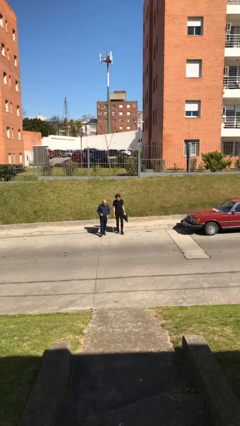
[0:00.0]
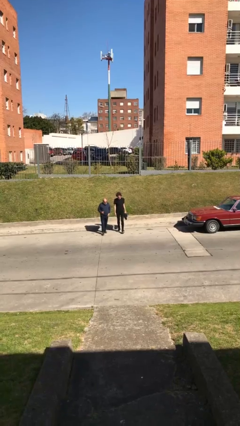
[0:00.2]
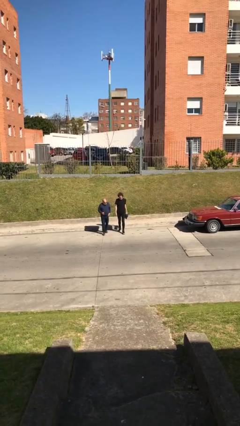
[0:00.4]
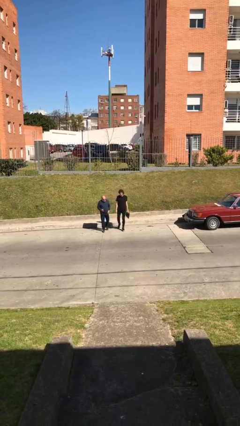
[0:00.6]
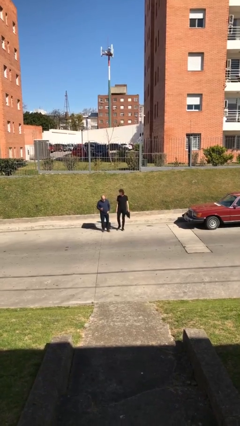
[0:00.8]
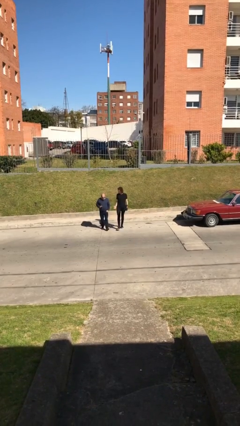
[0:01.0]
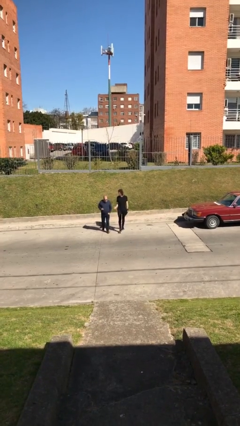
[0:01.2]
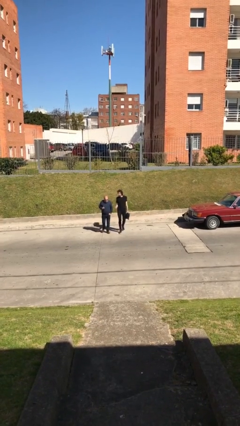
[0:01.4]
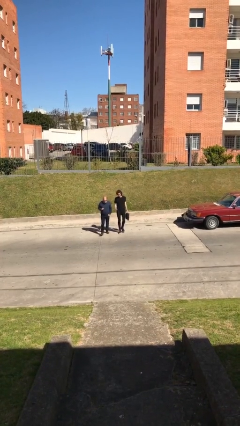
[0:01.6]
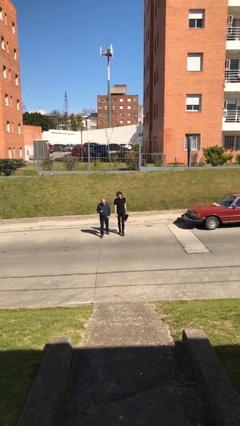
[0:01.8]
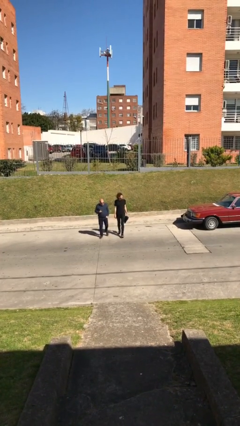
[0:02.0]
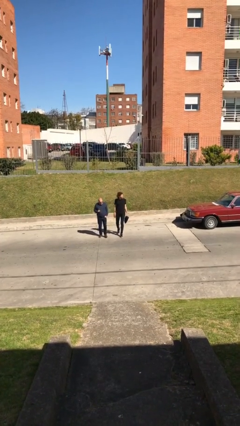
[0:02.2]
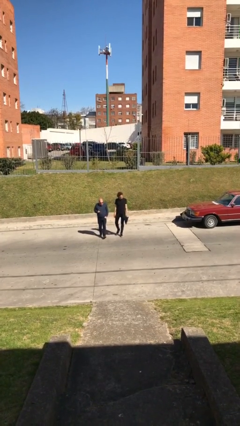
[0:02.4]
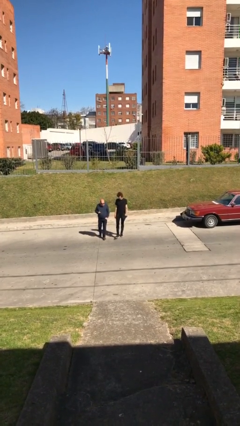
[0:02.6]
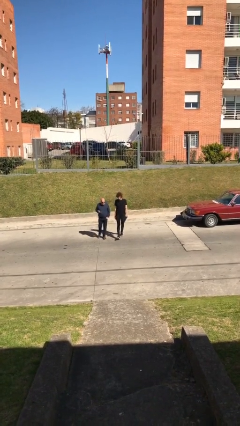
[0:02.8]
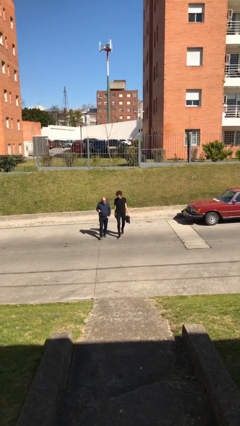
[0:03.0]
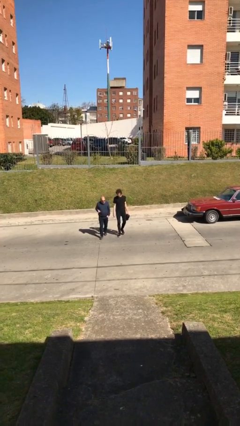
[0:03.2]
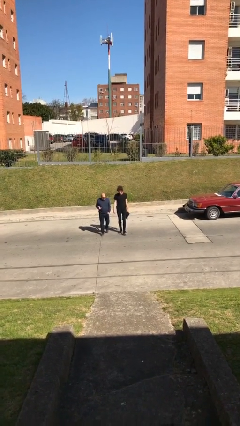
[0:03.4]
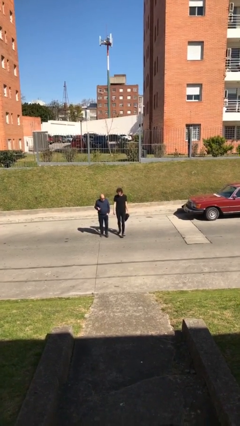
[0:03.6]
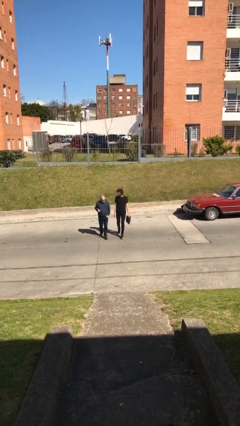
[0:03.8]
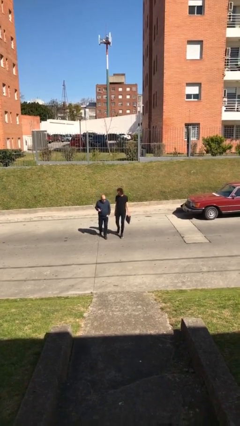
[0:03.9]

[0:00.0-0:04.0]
person talks to person

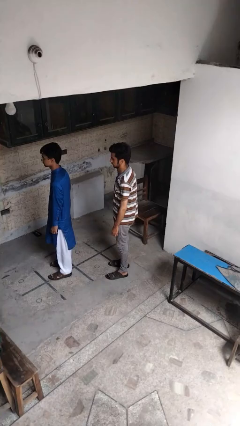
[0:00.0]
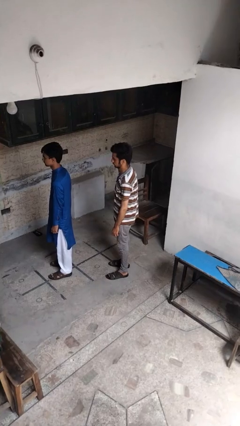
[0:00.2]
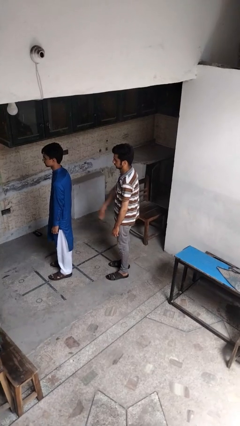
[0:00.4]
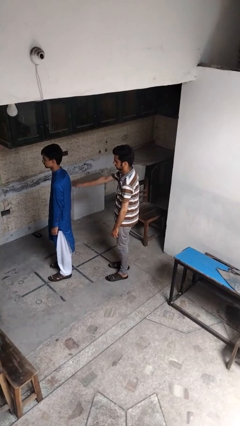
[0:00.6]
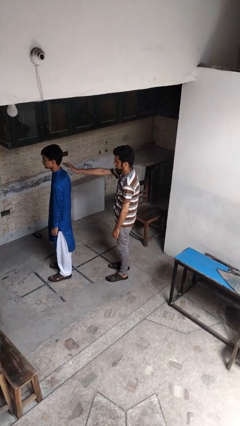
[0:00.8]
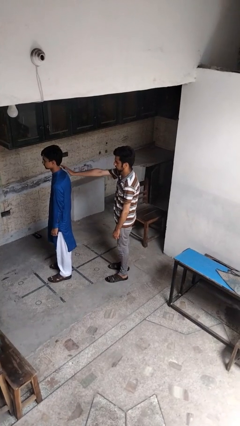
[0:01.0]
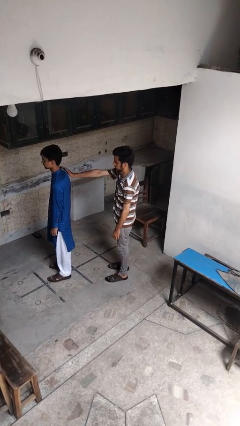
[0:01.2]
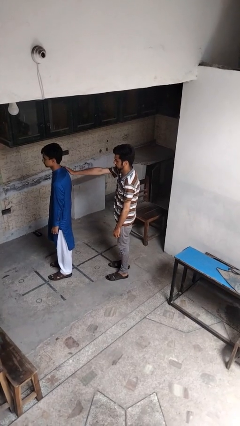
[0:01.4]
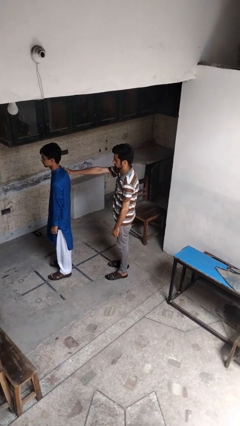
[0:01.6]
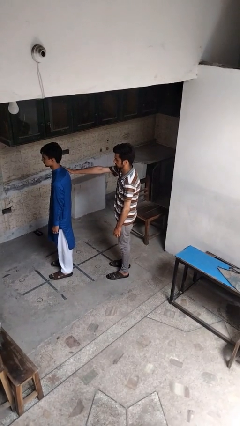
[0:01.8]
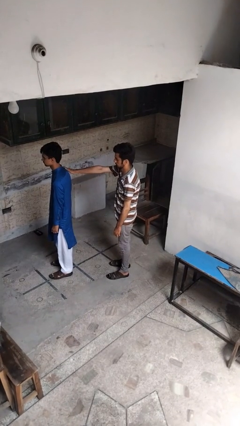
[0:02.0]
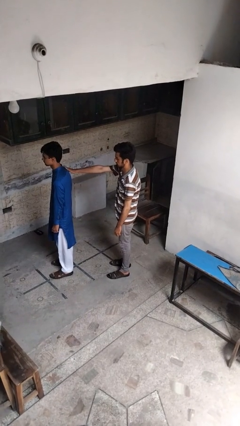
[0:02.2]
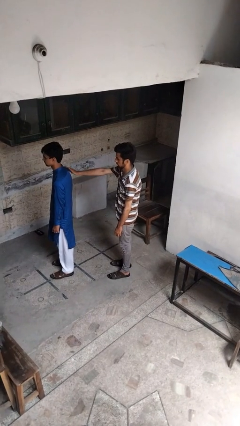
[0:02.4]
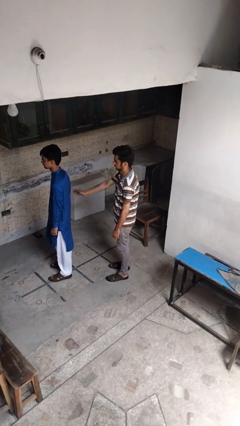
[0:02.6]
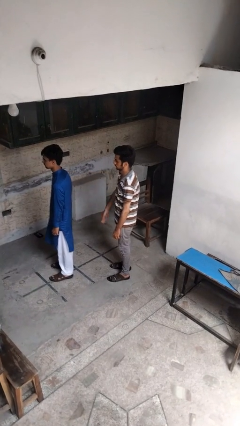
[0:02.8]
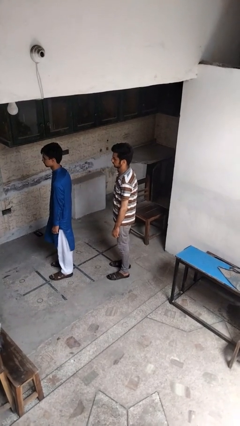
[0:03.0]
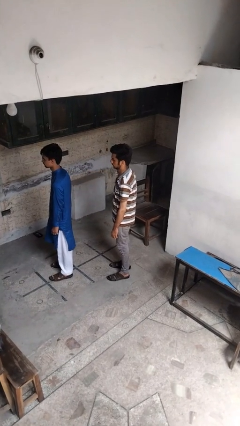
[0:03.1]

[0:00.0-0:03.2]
person touches back of person

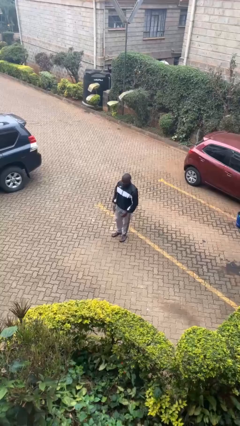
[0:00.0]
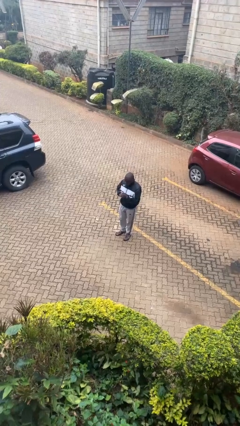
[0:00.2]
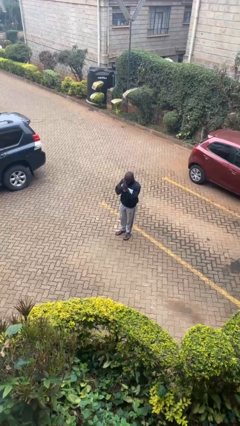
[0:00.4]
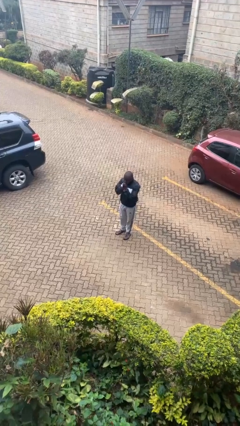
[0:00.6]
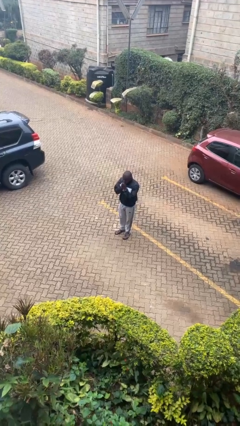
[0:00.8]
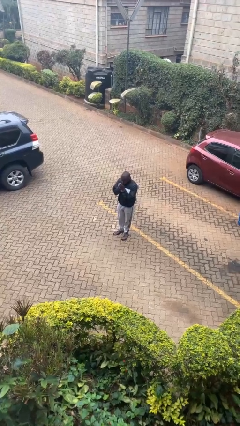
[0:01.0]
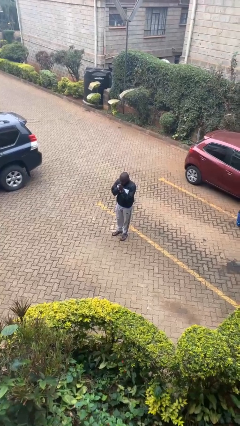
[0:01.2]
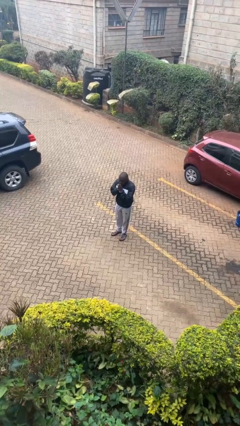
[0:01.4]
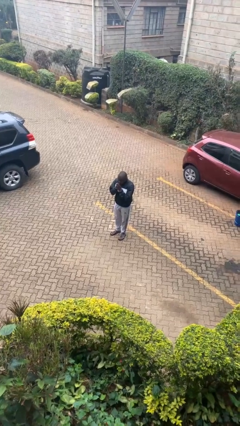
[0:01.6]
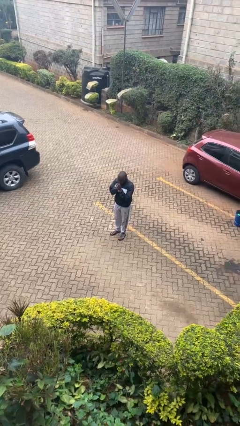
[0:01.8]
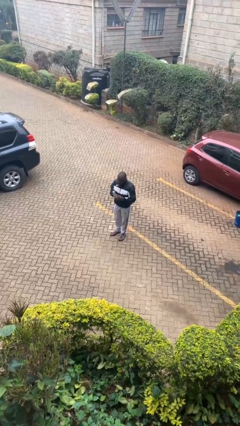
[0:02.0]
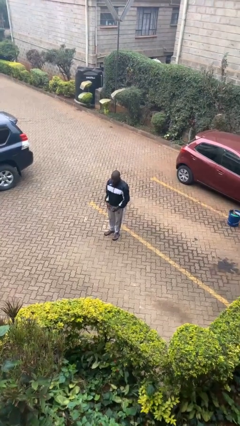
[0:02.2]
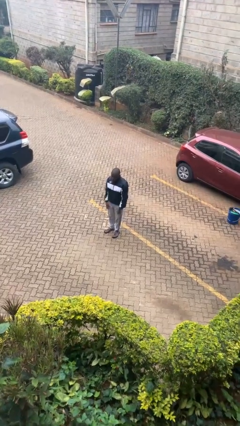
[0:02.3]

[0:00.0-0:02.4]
person blows into hands

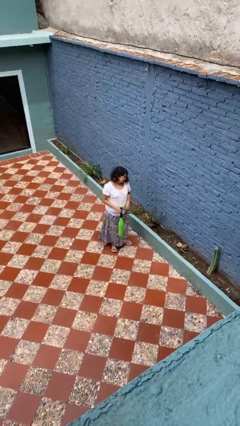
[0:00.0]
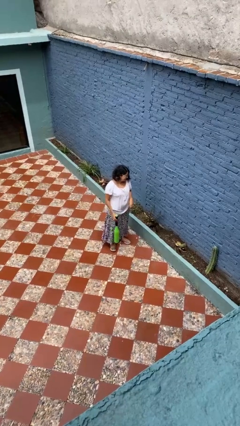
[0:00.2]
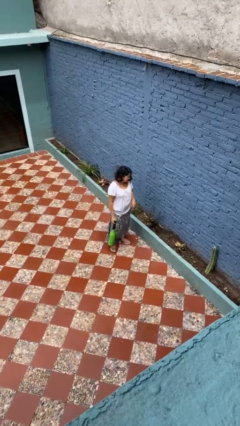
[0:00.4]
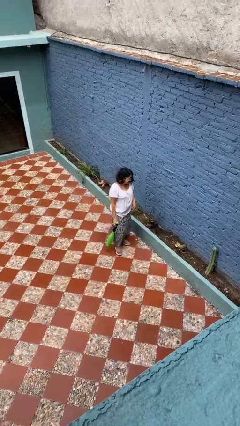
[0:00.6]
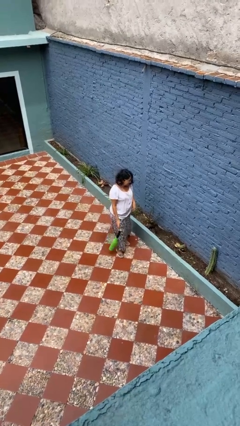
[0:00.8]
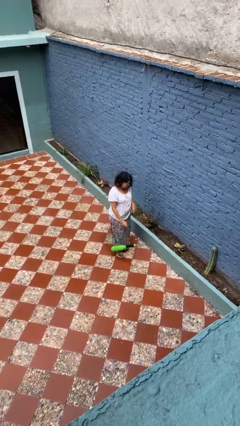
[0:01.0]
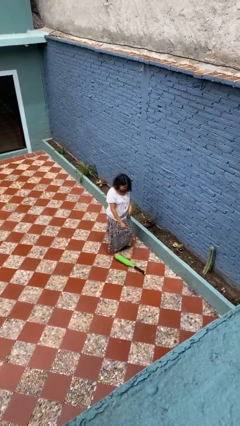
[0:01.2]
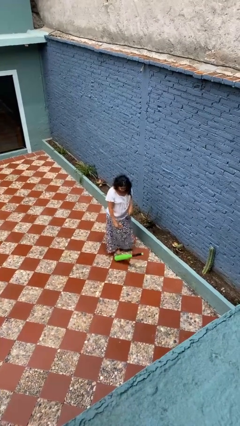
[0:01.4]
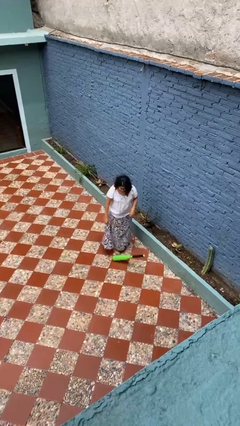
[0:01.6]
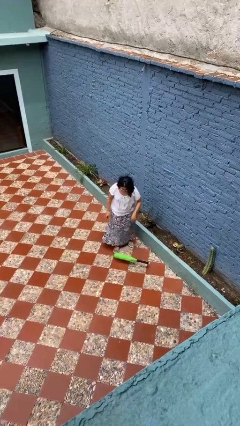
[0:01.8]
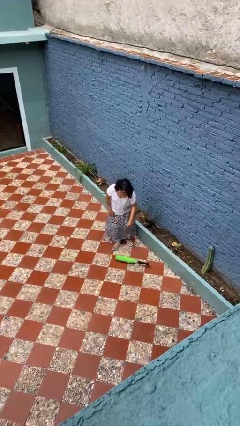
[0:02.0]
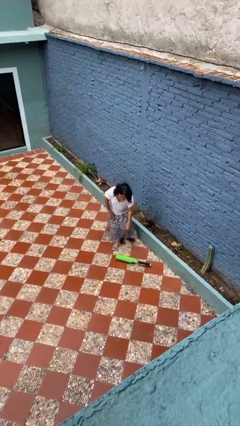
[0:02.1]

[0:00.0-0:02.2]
person drops object

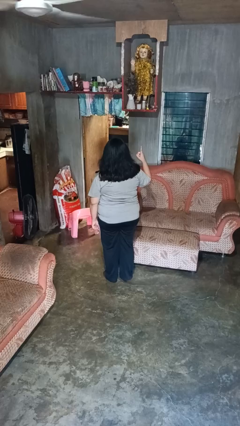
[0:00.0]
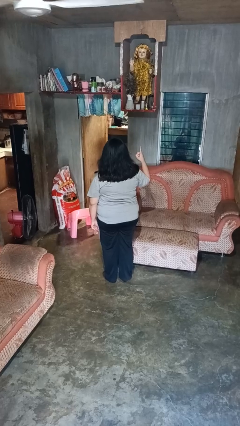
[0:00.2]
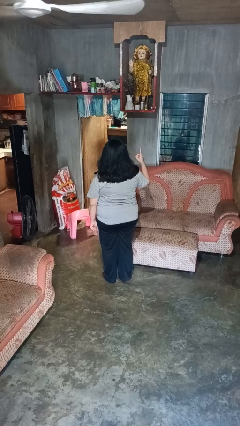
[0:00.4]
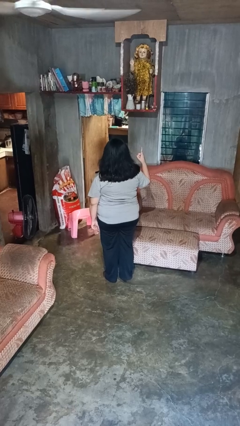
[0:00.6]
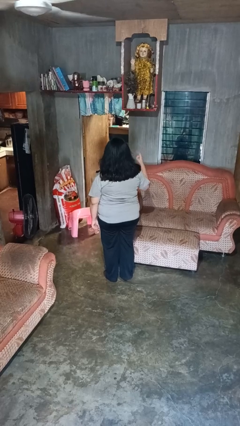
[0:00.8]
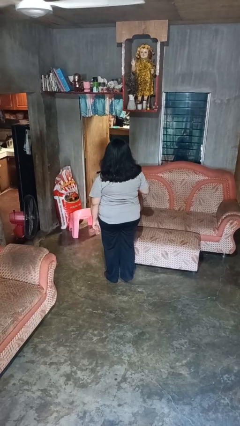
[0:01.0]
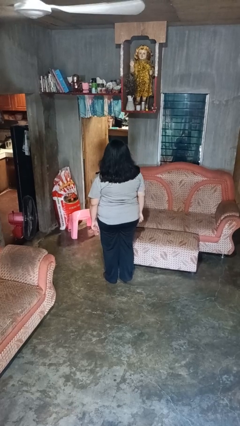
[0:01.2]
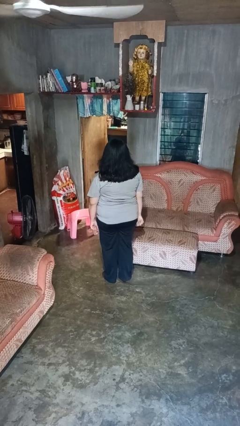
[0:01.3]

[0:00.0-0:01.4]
person gestures number one

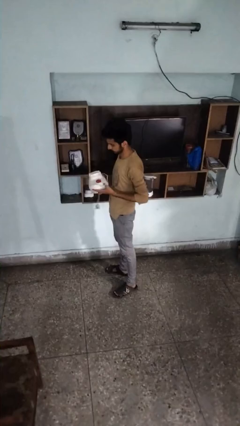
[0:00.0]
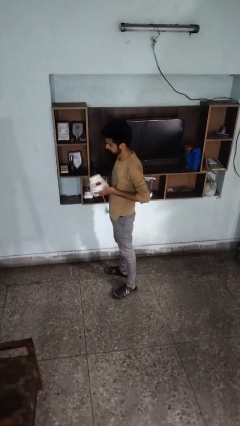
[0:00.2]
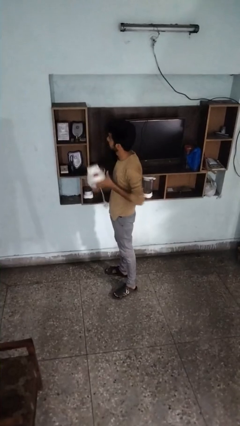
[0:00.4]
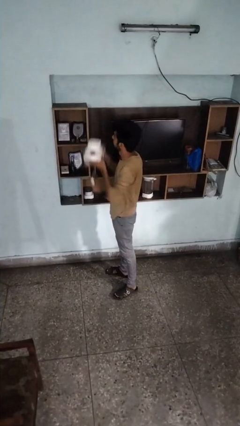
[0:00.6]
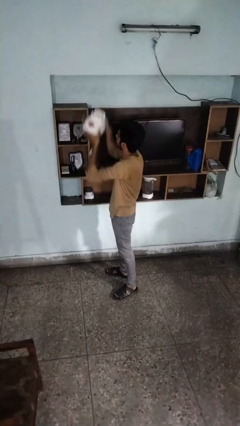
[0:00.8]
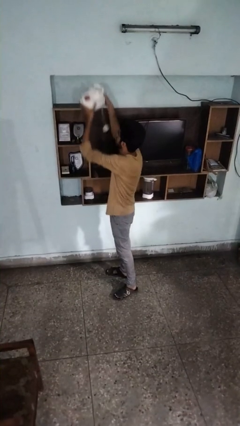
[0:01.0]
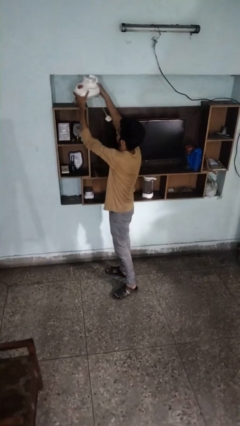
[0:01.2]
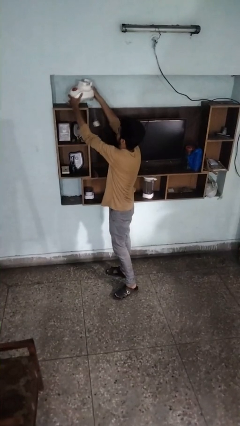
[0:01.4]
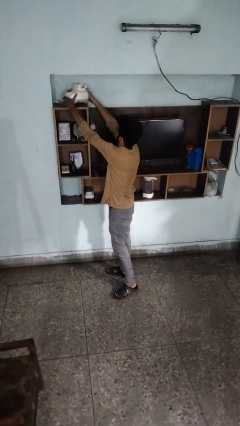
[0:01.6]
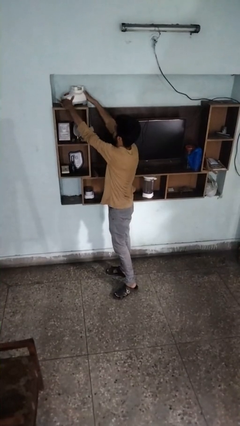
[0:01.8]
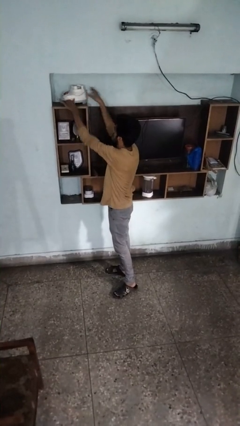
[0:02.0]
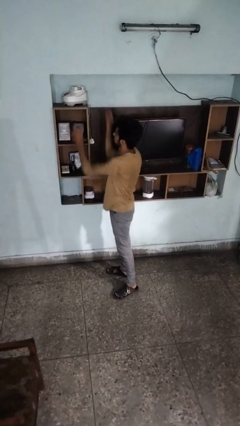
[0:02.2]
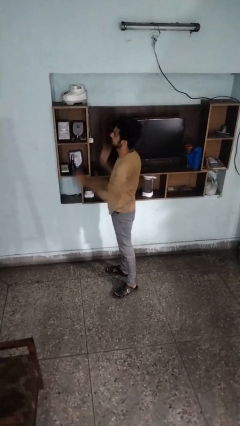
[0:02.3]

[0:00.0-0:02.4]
person puts down object on shelf

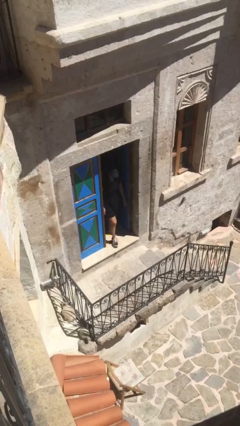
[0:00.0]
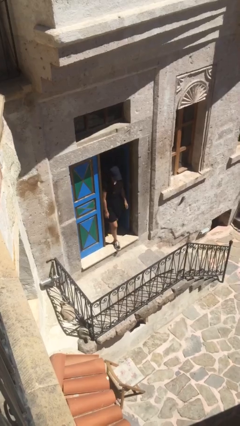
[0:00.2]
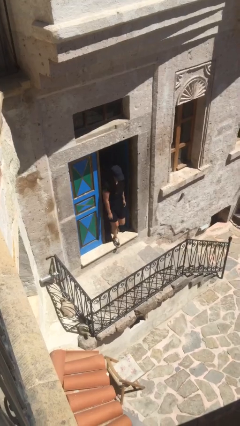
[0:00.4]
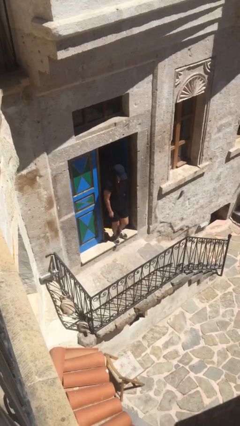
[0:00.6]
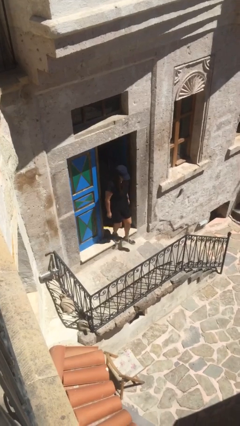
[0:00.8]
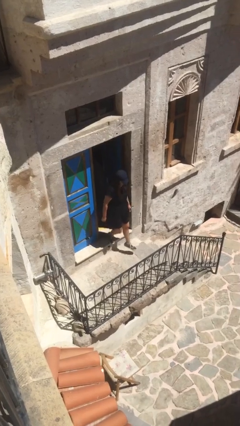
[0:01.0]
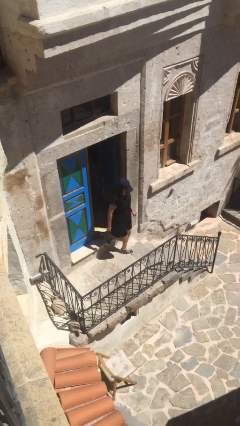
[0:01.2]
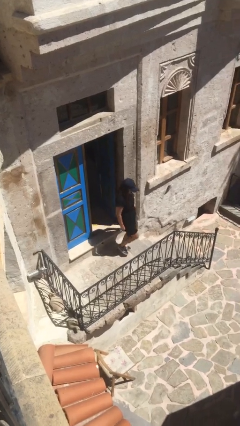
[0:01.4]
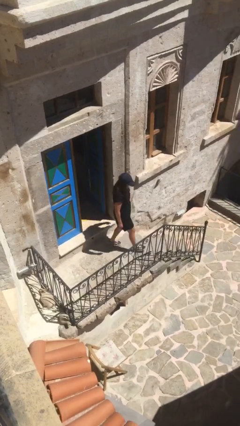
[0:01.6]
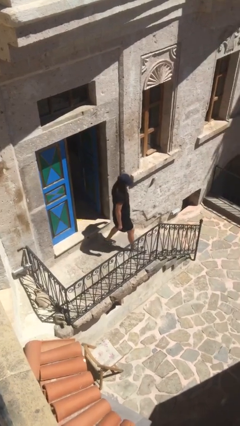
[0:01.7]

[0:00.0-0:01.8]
person enters scene through structure
